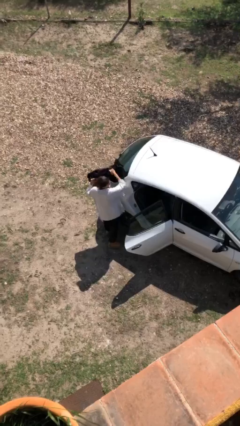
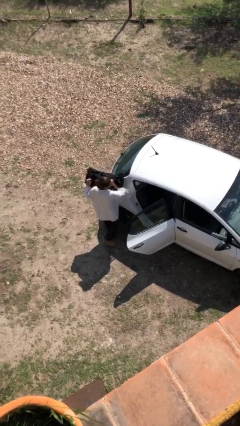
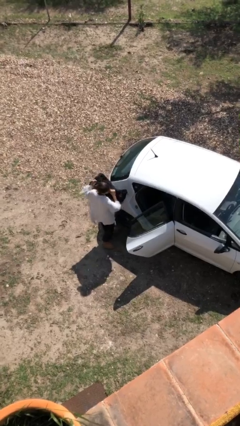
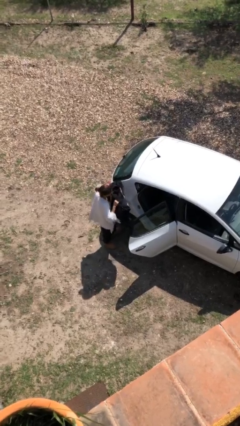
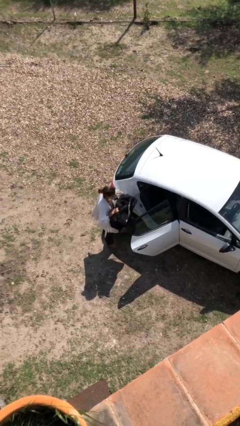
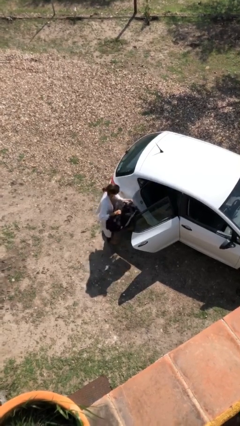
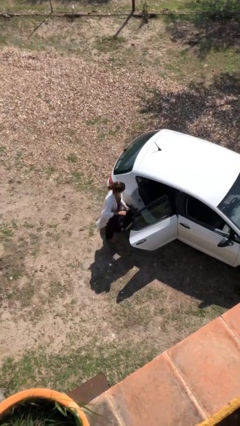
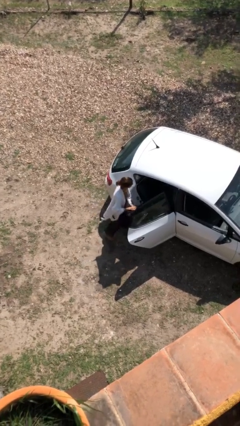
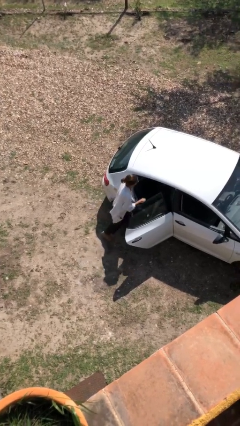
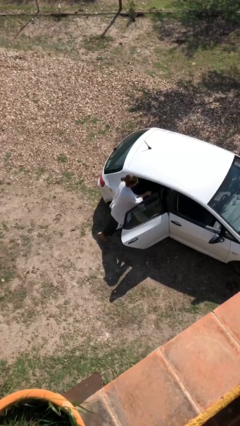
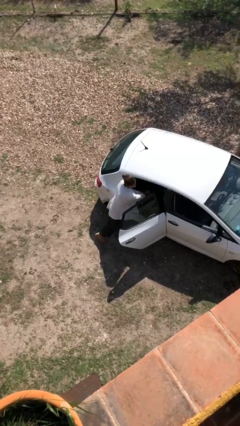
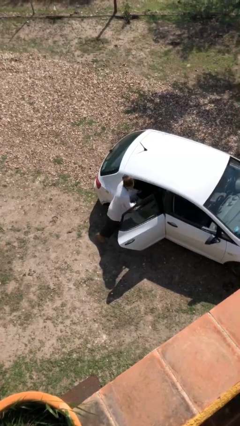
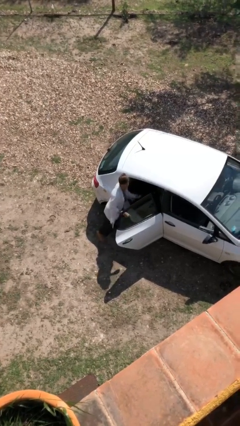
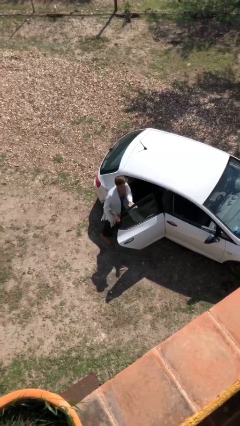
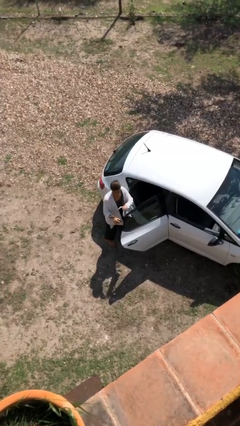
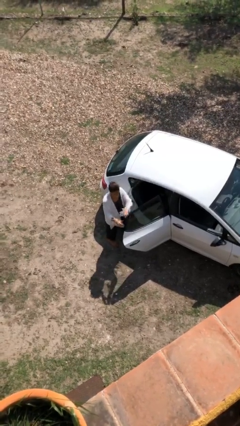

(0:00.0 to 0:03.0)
person loads car

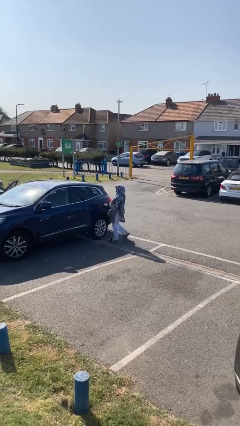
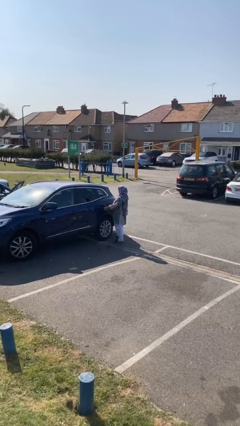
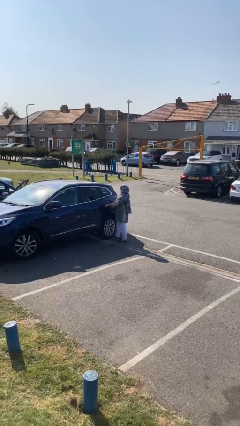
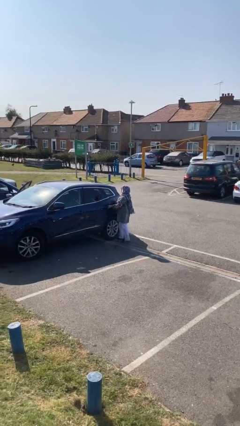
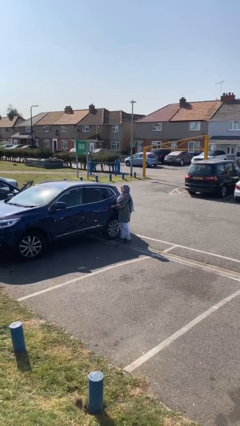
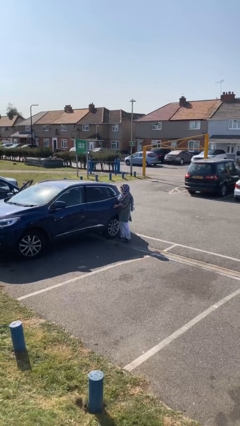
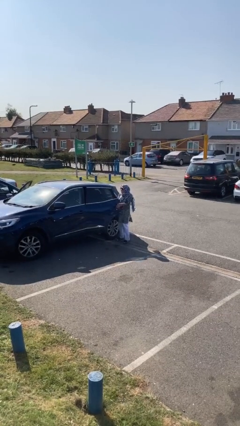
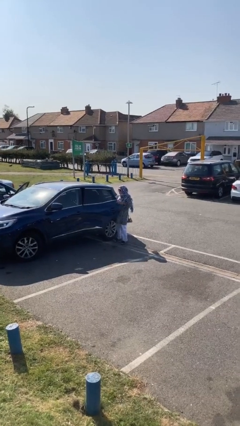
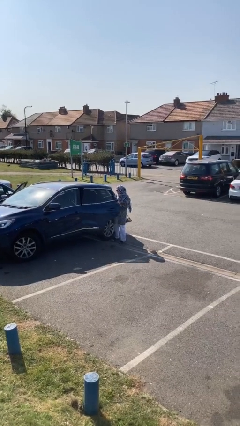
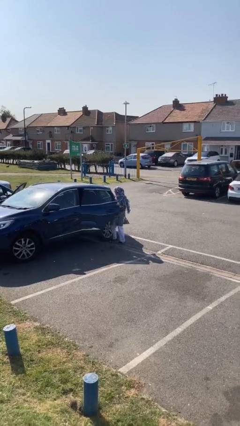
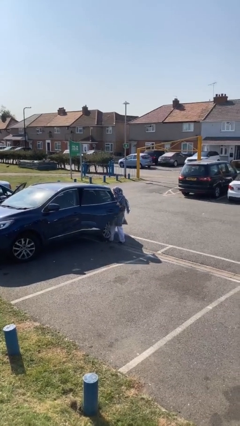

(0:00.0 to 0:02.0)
person opens car door

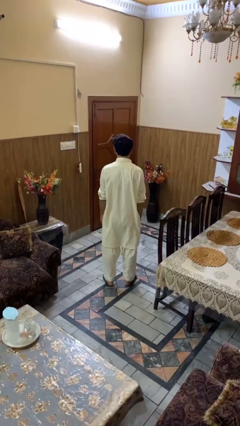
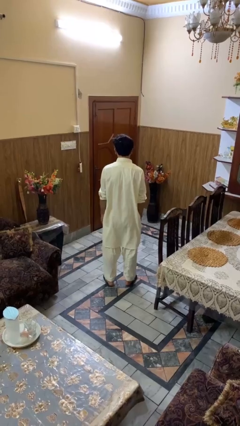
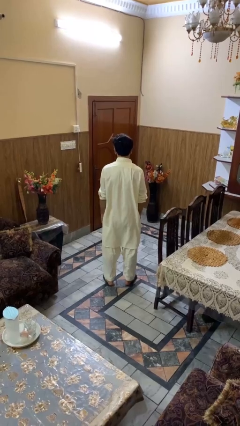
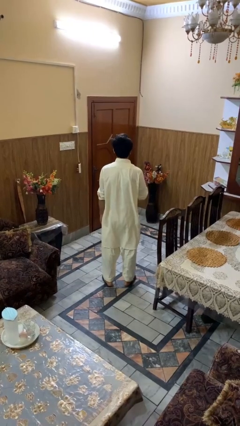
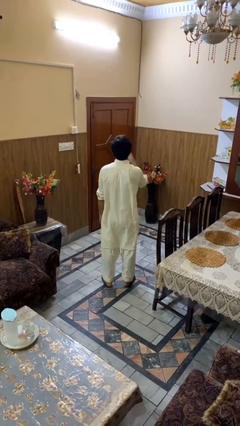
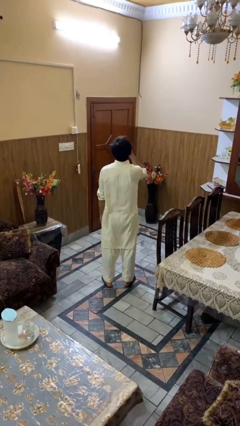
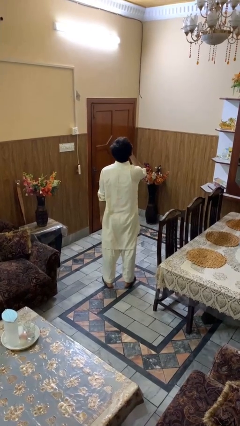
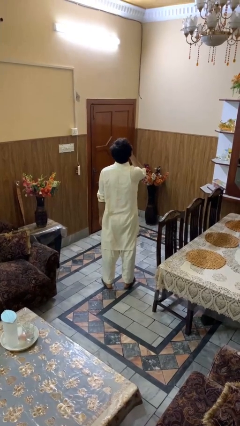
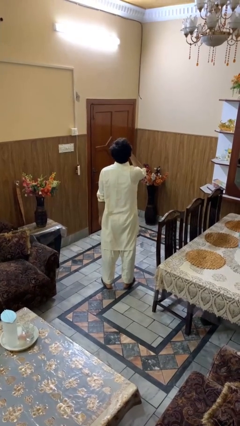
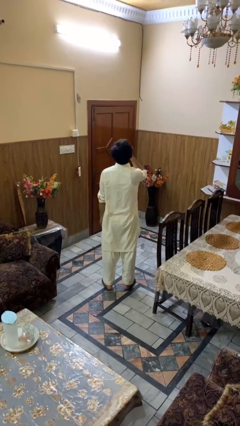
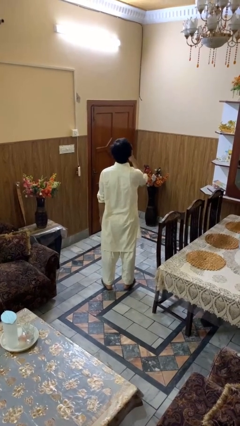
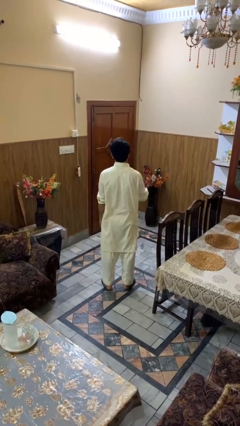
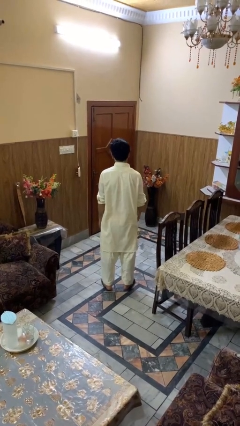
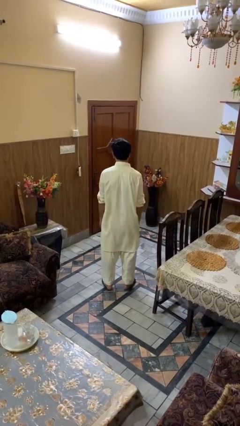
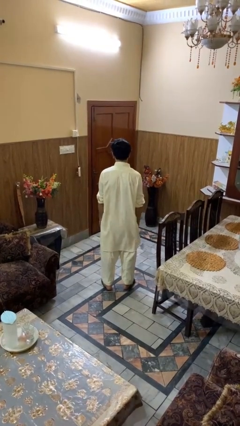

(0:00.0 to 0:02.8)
person yawns

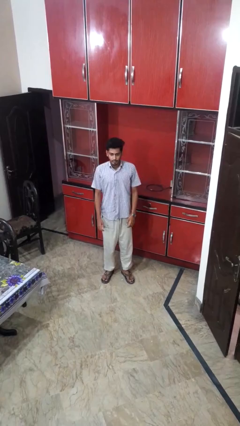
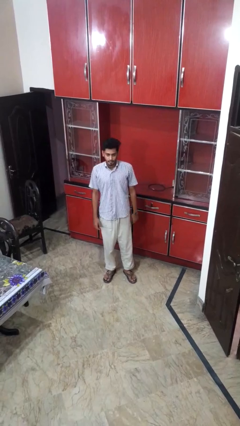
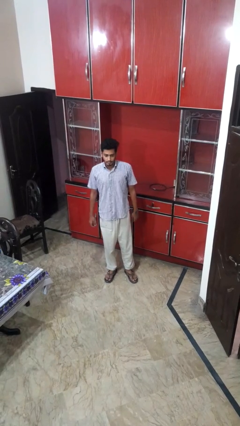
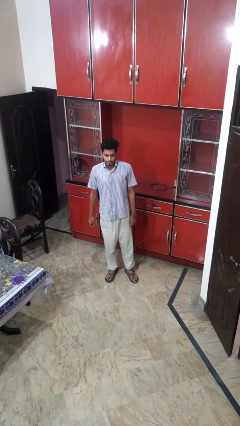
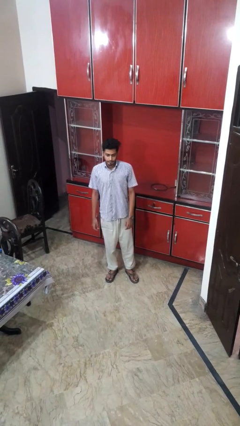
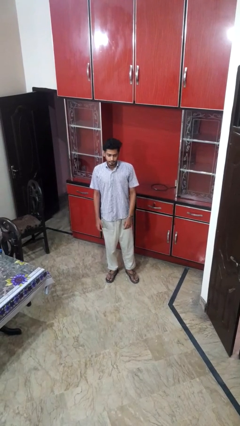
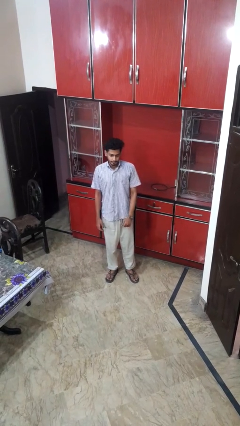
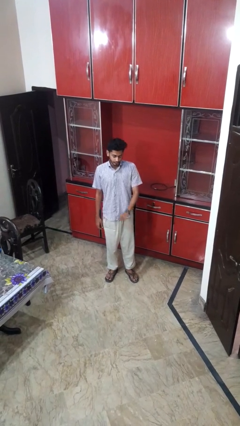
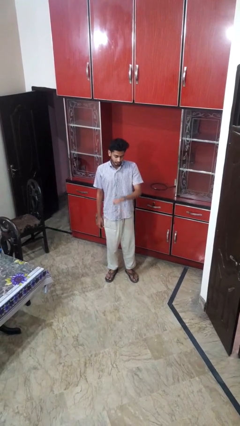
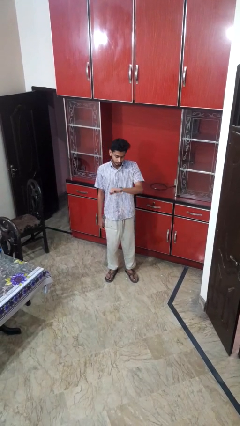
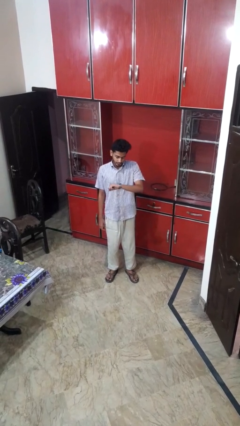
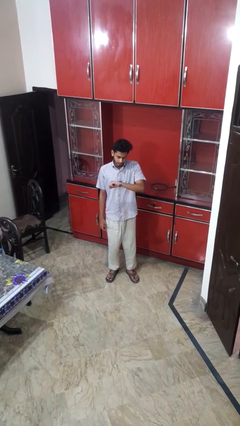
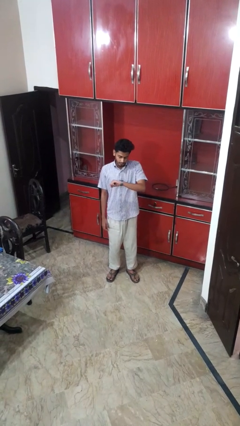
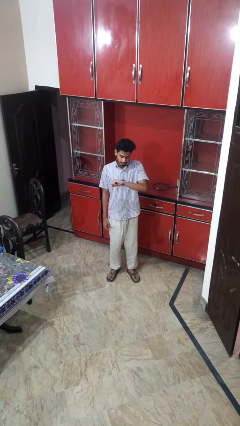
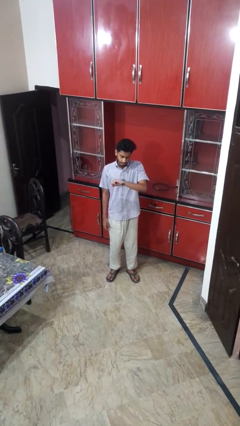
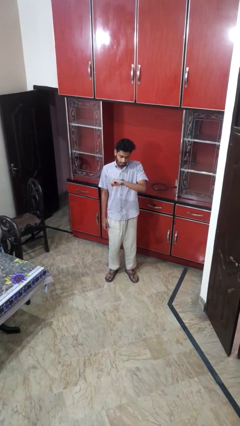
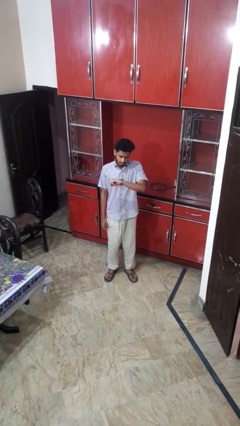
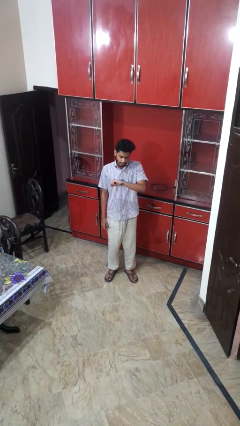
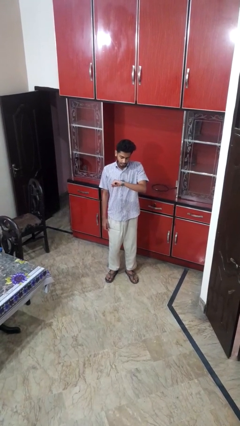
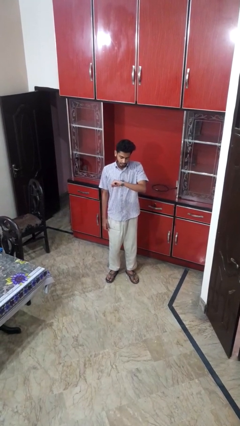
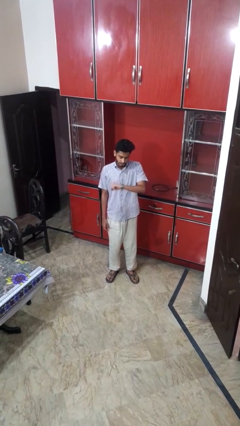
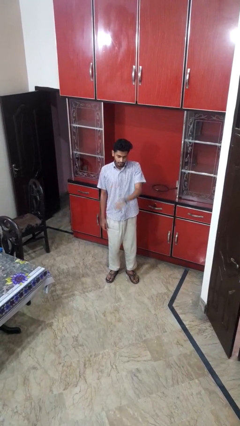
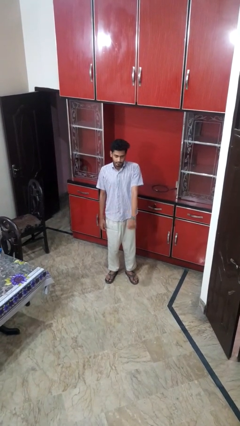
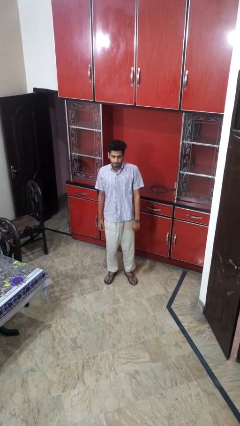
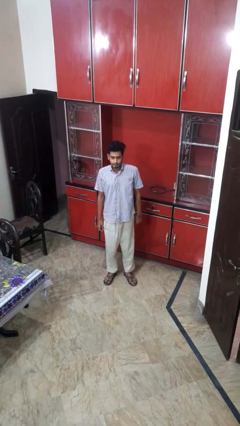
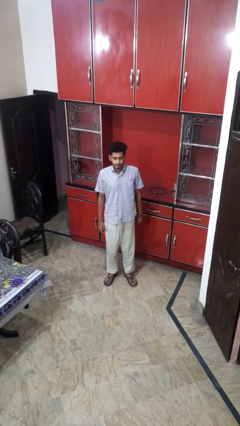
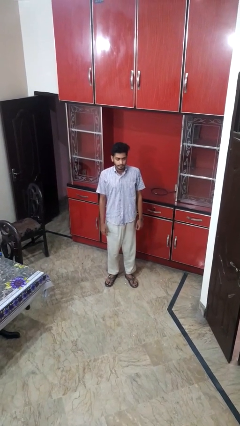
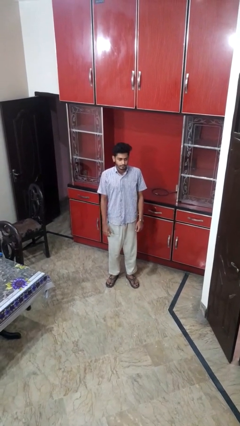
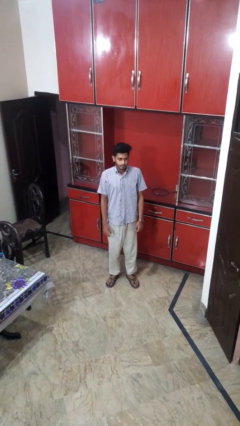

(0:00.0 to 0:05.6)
person stands up from floor

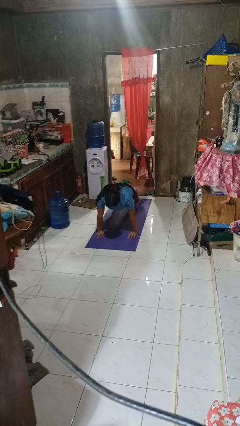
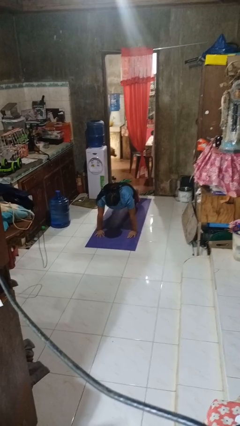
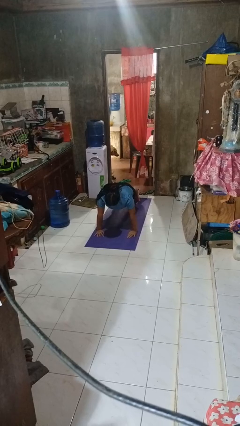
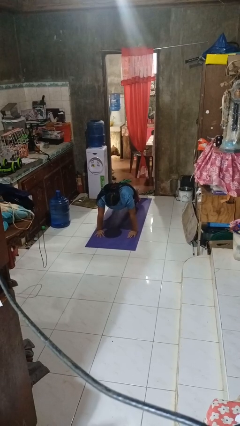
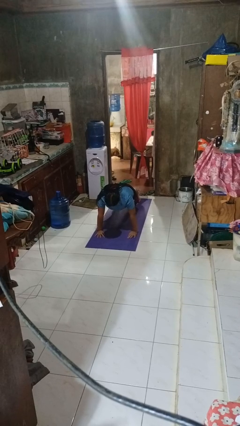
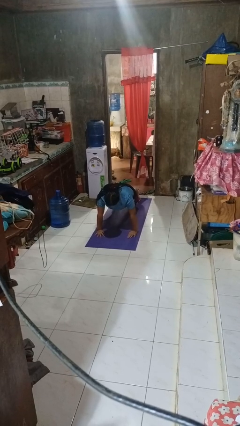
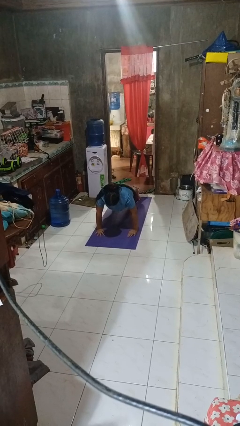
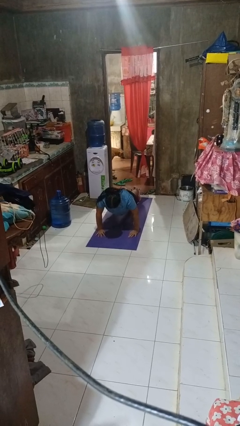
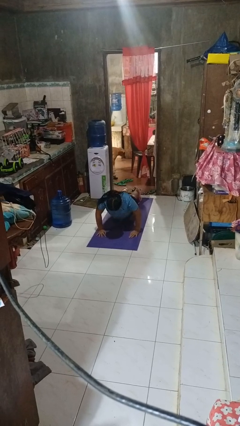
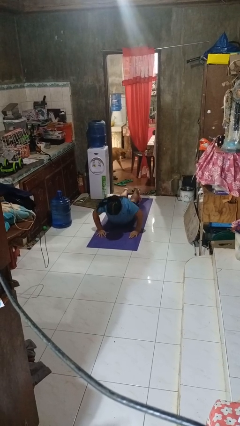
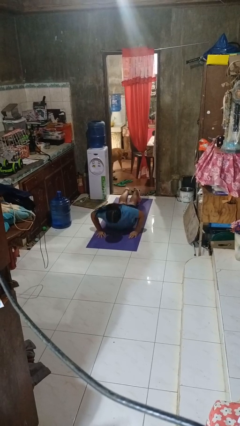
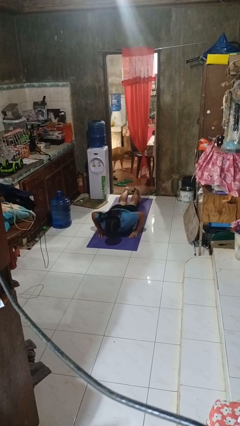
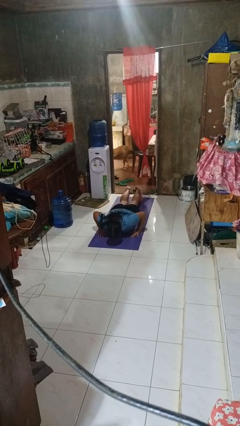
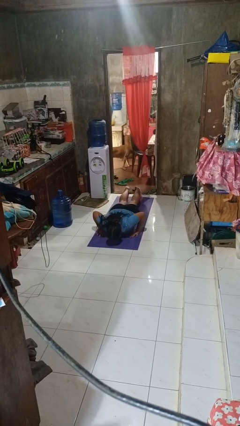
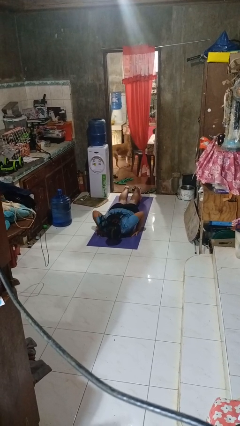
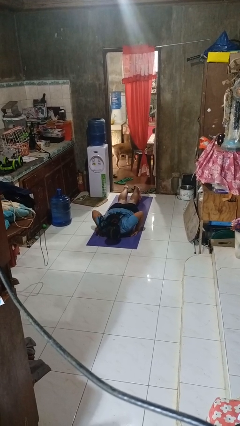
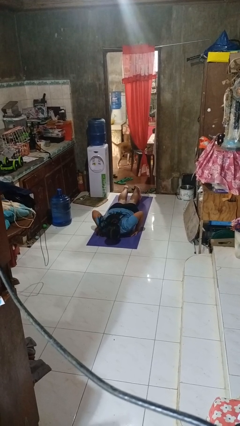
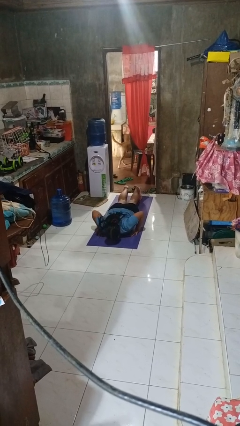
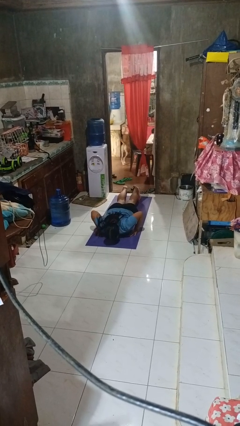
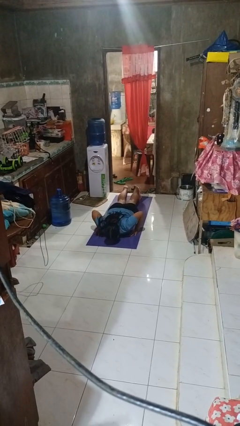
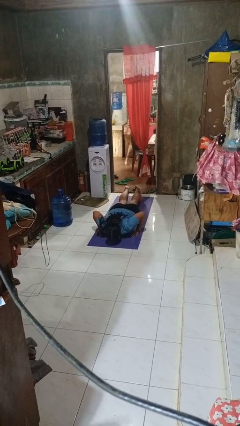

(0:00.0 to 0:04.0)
person exercises with pushup
